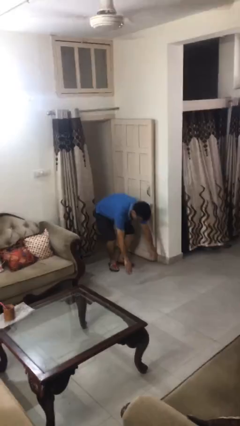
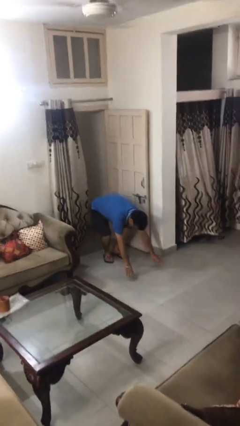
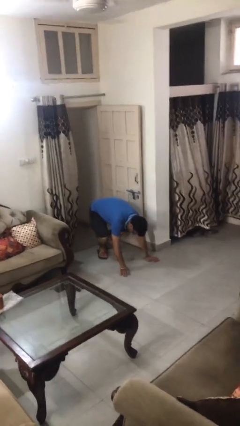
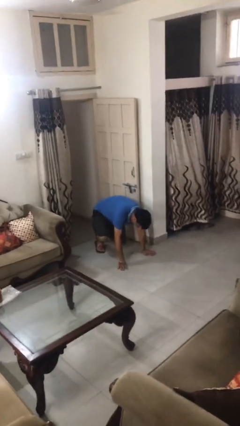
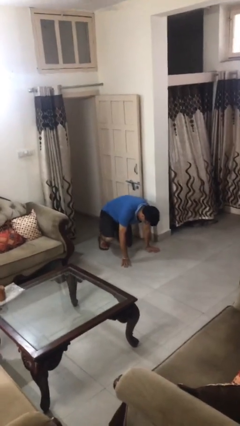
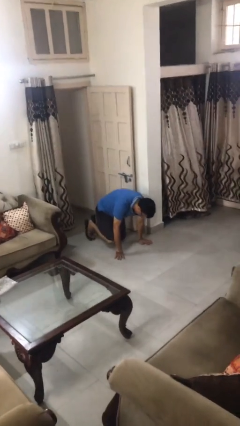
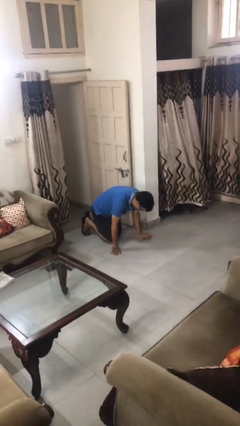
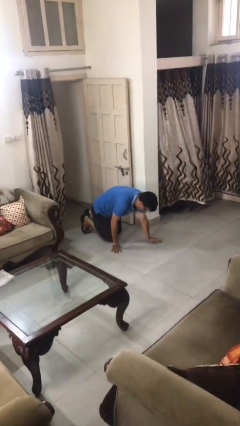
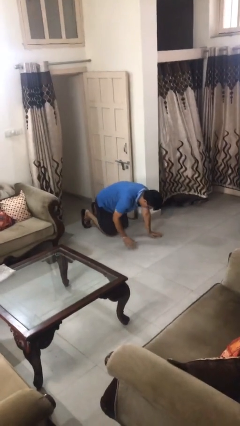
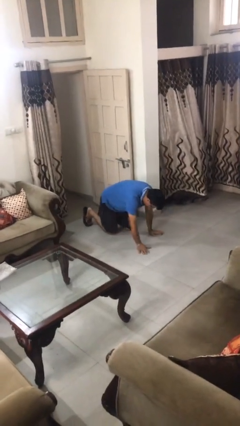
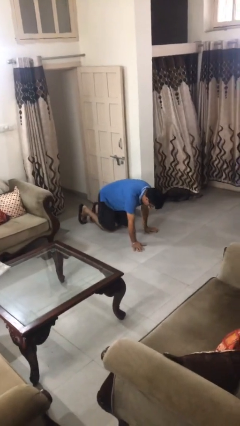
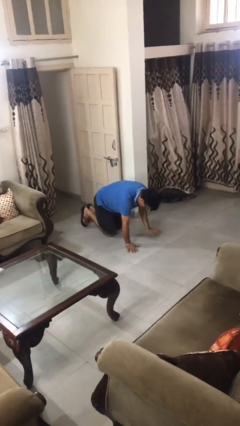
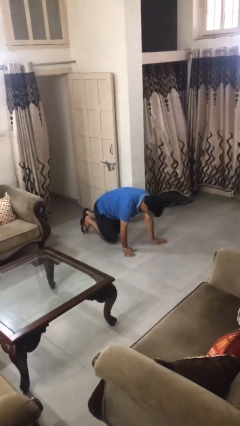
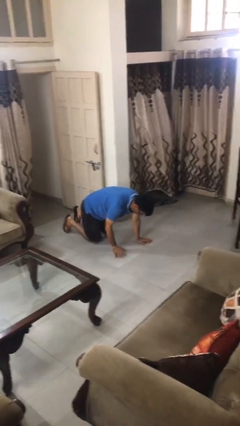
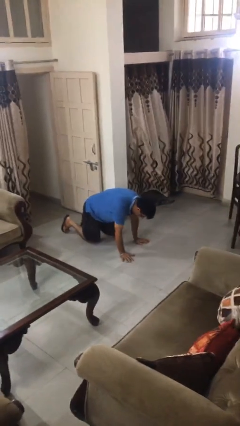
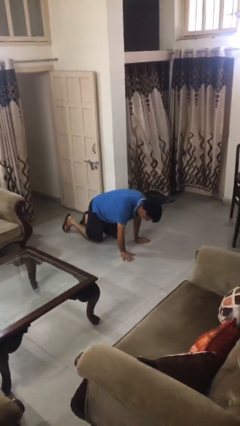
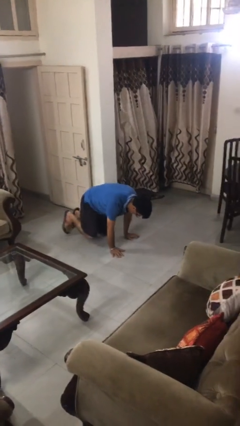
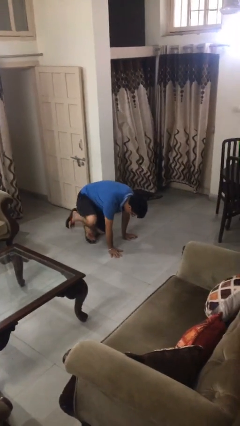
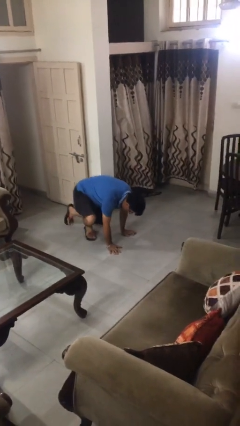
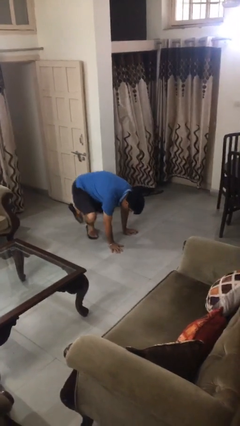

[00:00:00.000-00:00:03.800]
person crawls

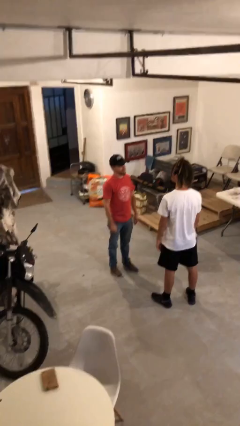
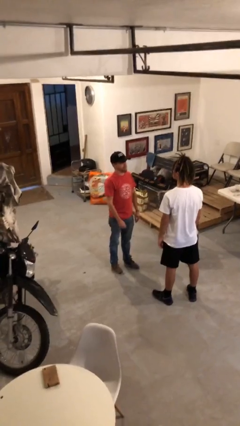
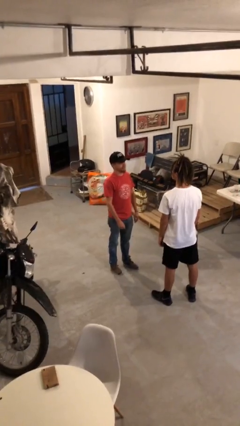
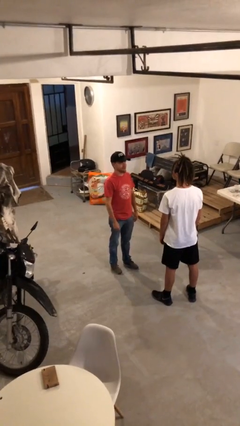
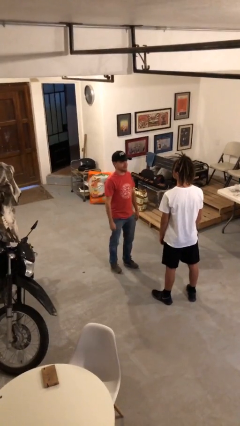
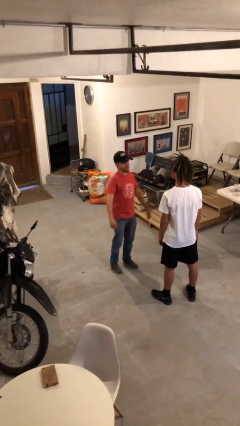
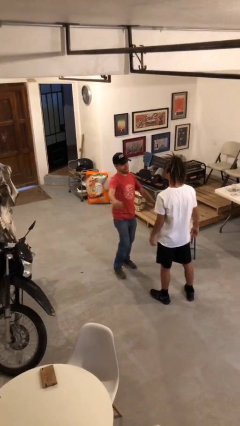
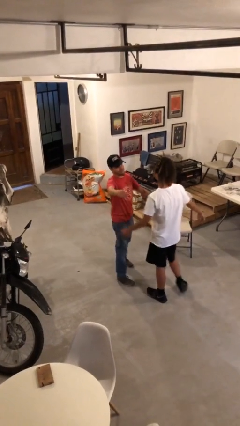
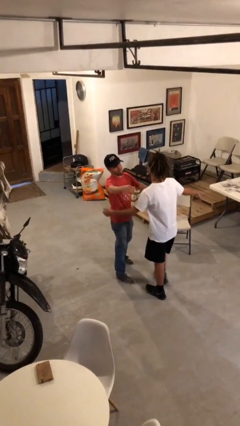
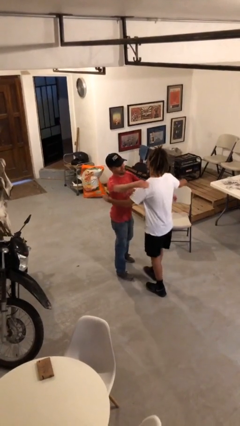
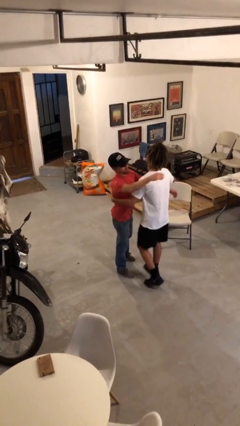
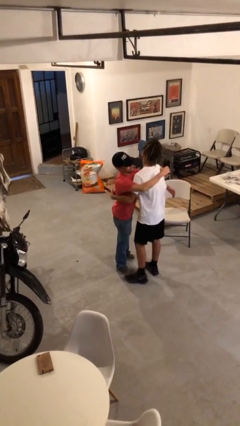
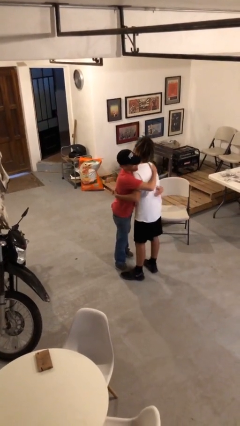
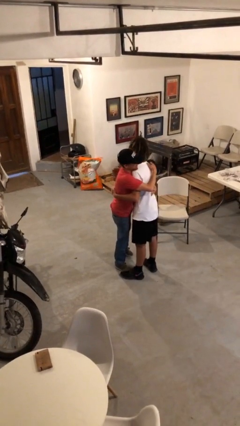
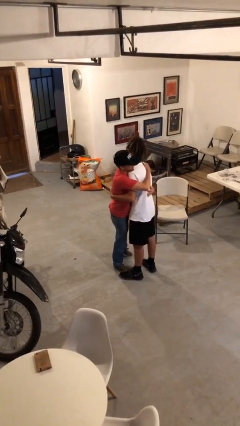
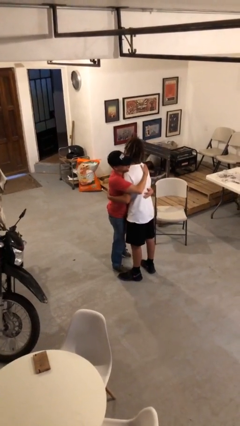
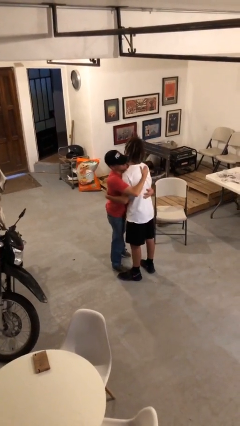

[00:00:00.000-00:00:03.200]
person embraces person

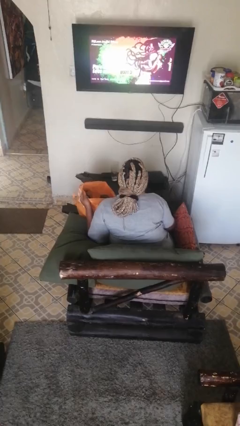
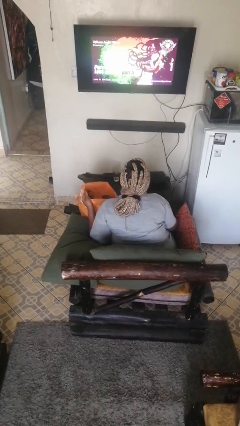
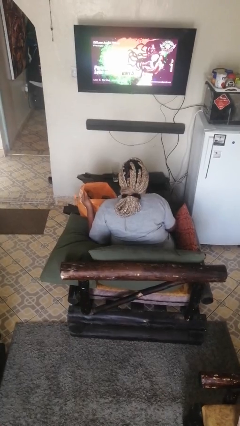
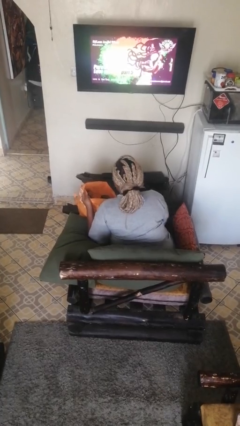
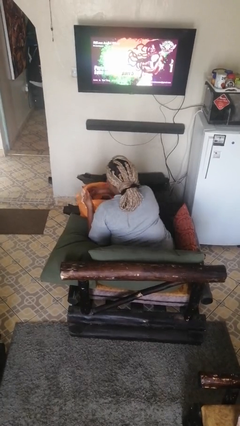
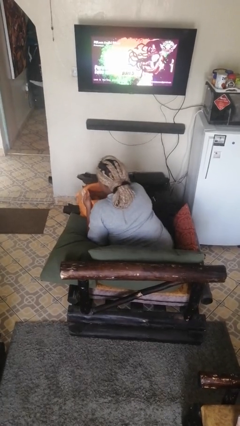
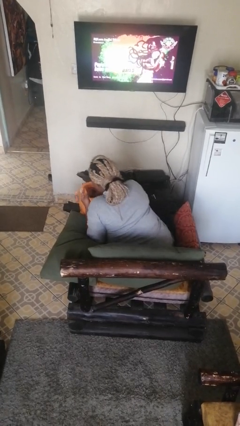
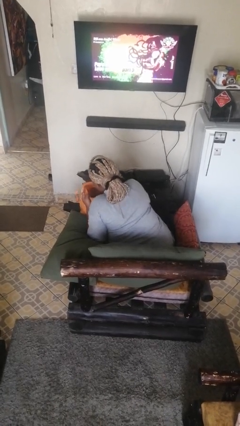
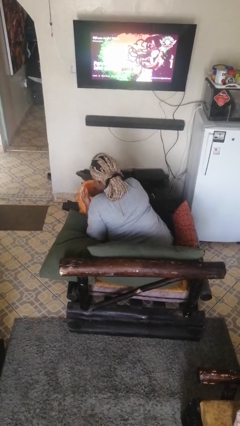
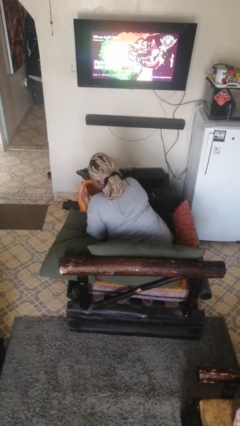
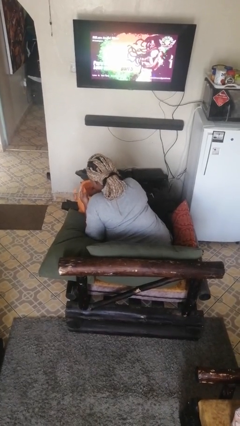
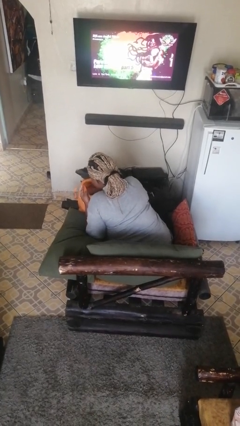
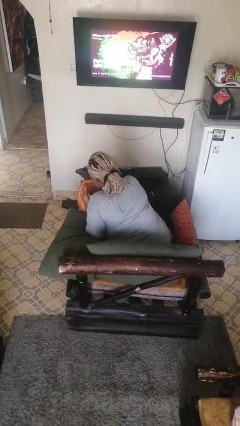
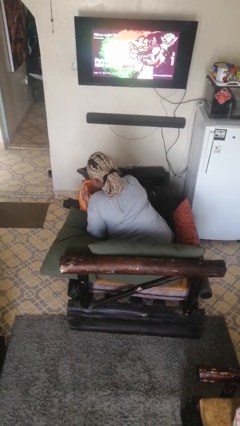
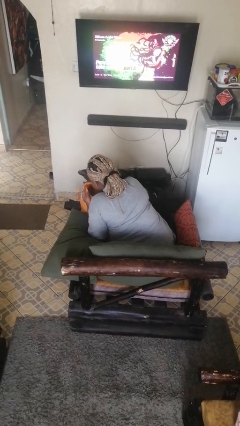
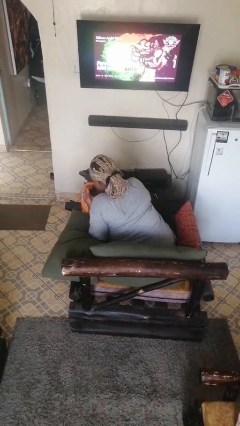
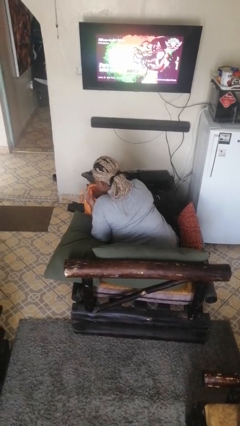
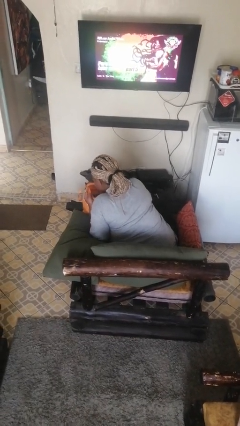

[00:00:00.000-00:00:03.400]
person searches in bag

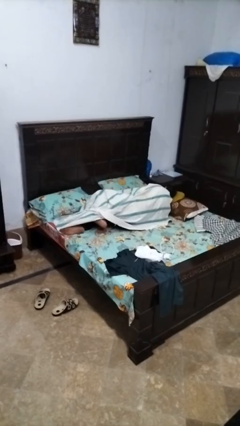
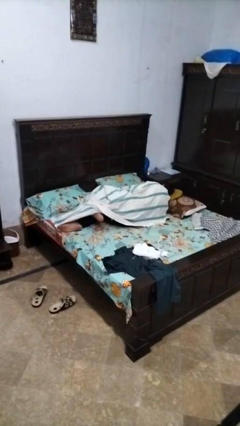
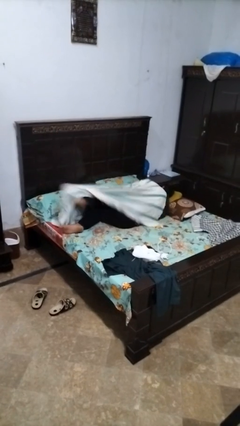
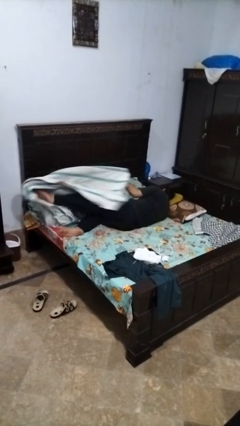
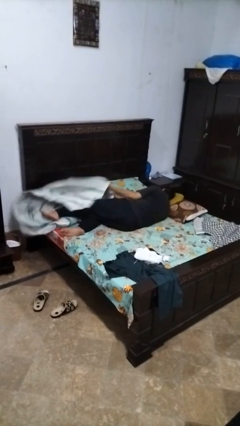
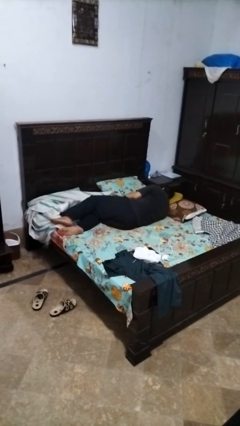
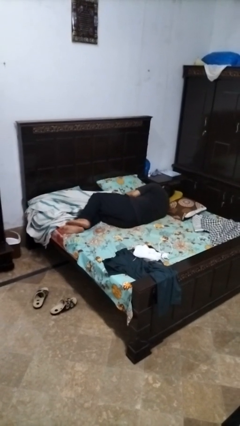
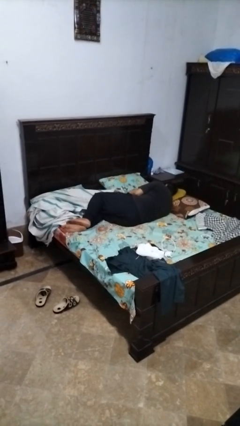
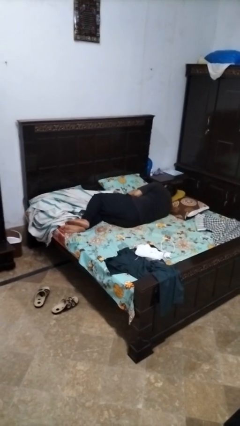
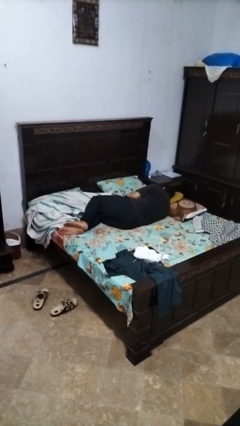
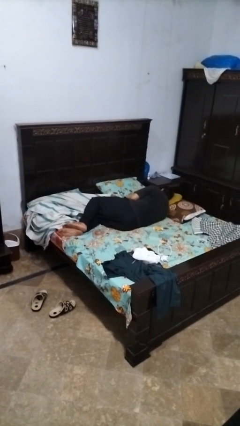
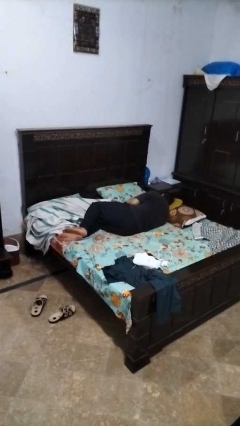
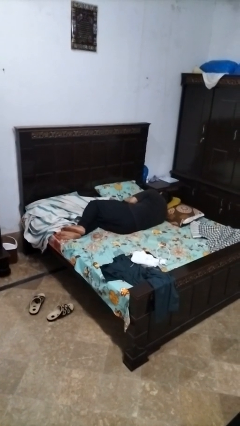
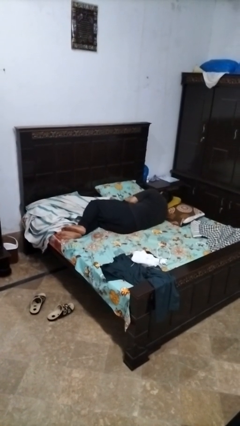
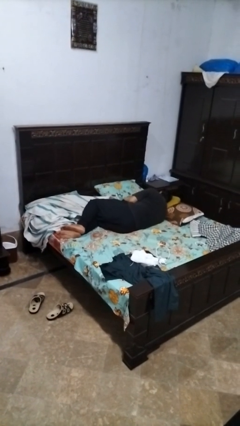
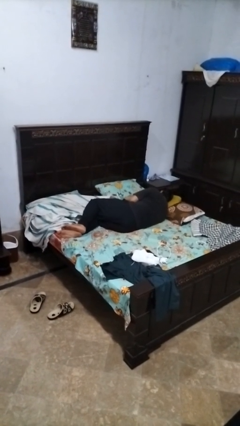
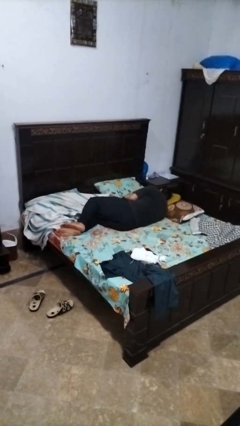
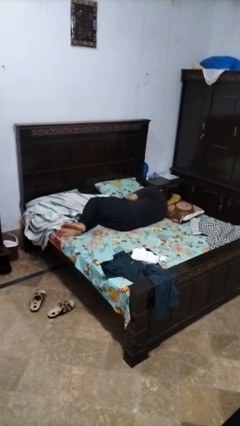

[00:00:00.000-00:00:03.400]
person uncovers with bedsheets

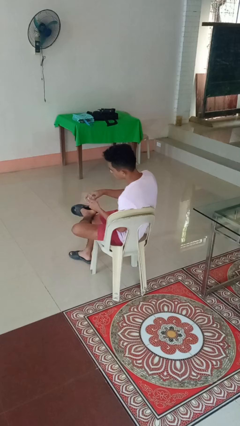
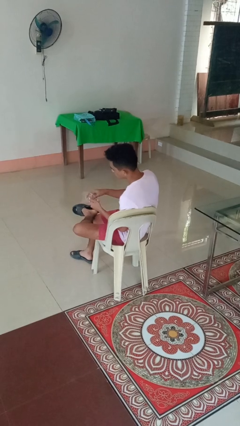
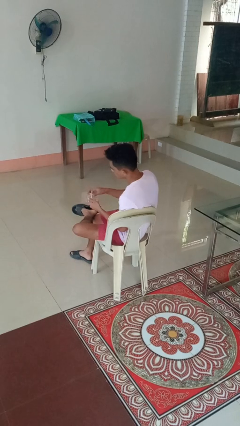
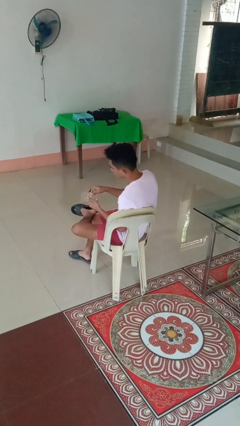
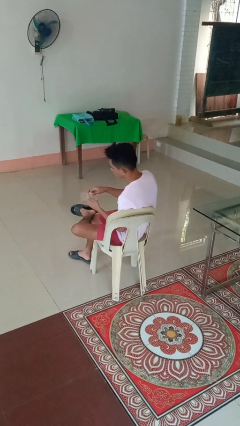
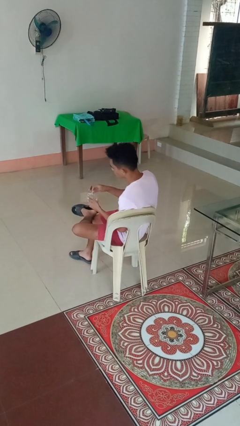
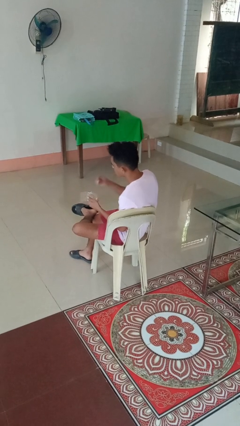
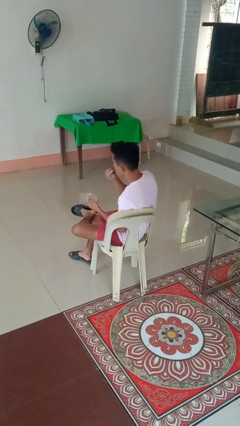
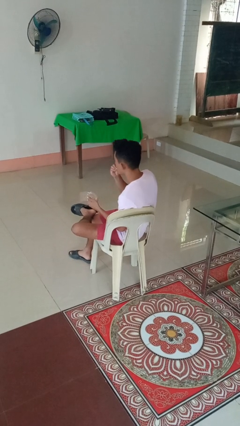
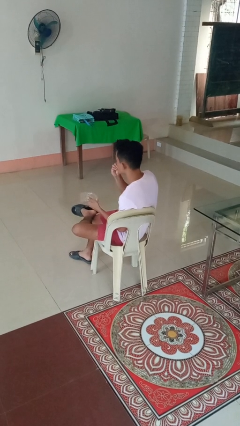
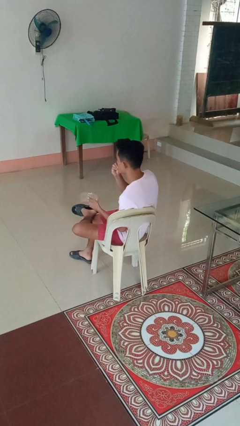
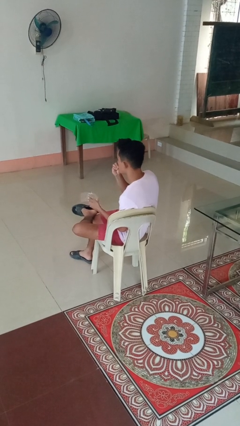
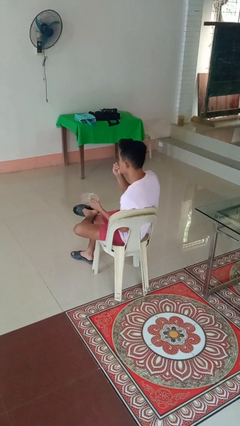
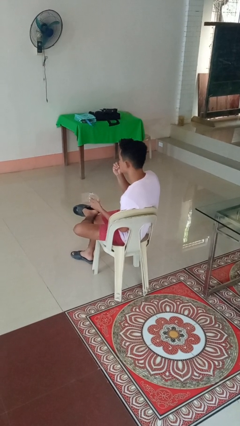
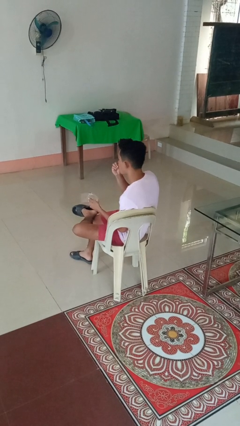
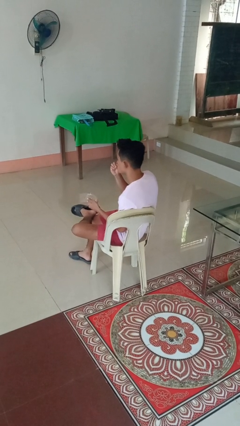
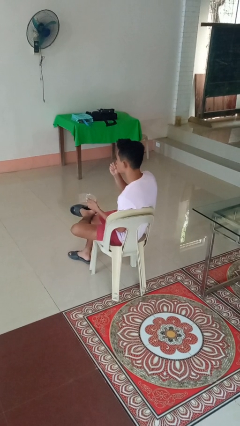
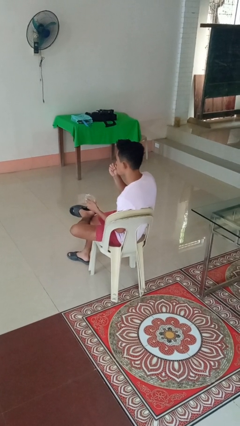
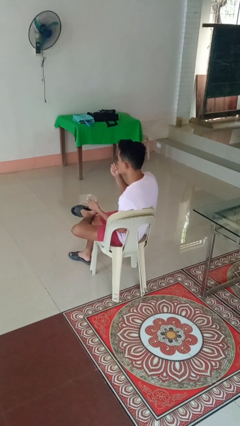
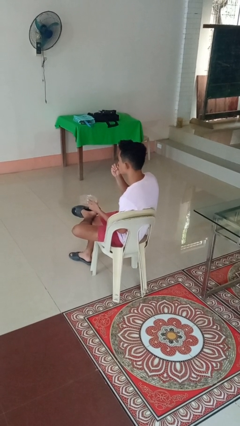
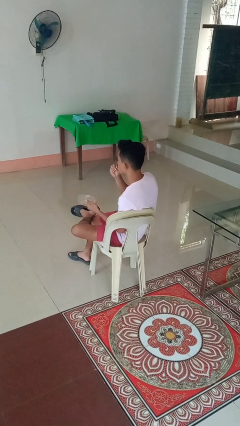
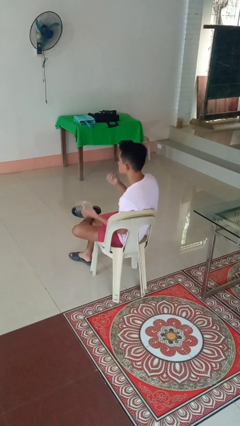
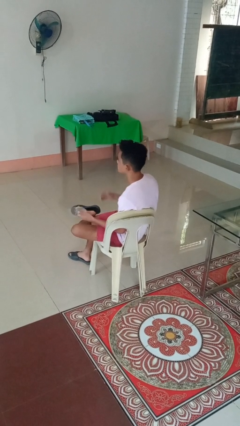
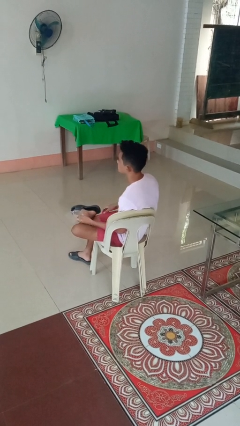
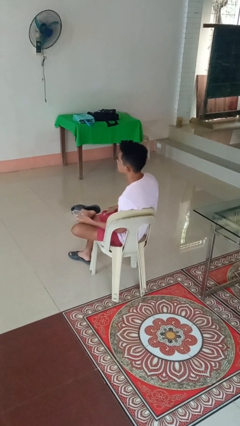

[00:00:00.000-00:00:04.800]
person eats snack from bag
